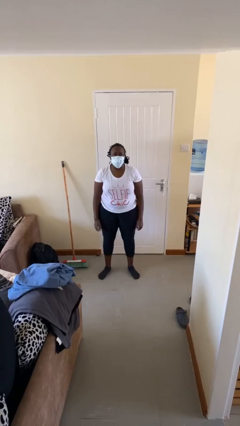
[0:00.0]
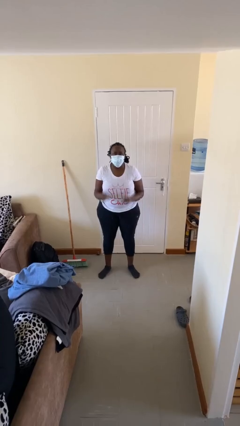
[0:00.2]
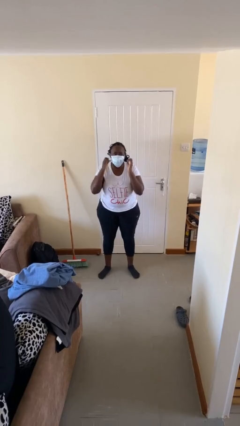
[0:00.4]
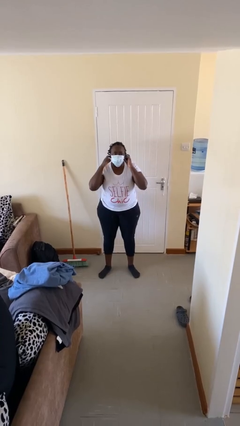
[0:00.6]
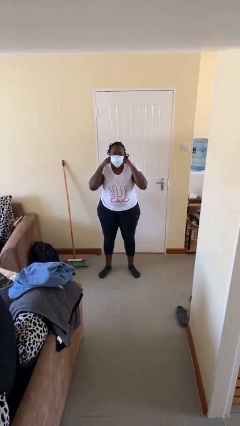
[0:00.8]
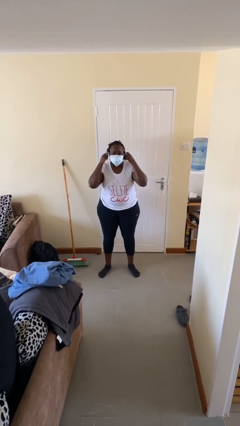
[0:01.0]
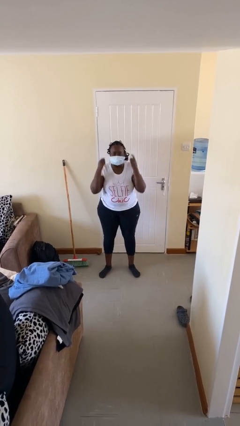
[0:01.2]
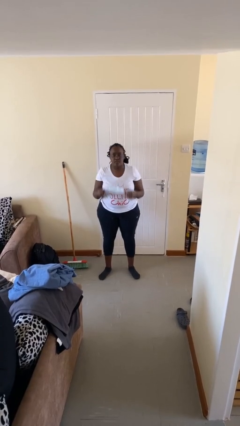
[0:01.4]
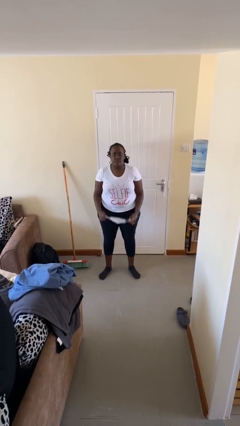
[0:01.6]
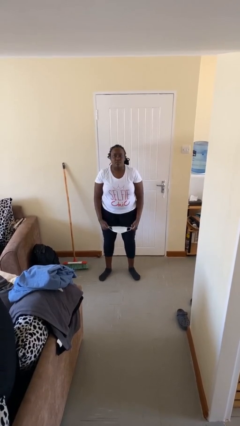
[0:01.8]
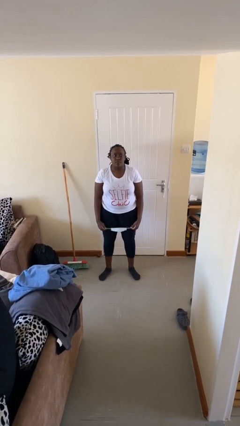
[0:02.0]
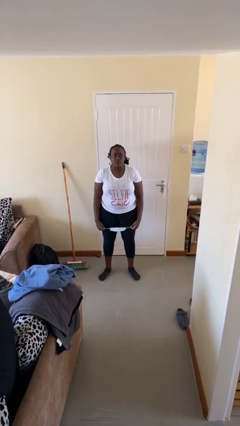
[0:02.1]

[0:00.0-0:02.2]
person takes off facemask

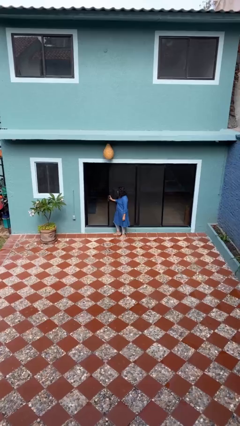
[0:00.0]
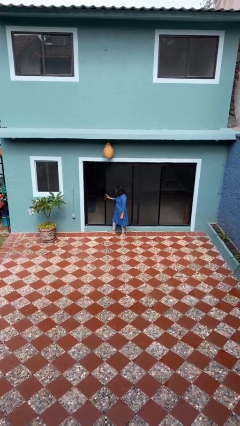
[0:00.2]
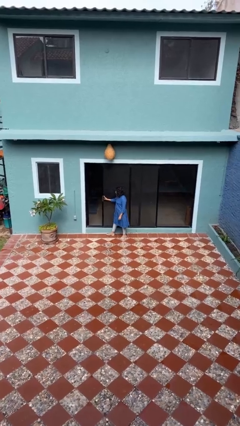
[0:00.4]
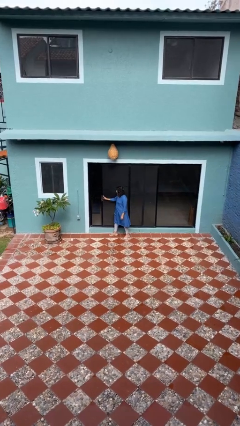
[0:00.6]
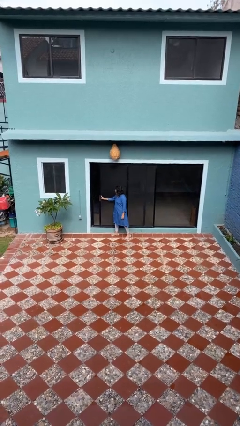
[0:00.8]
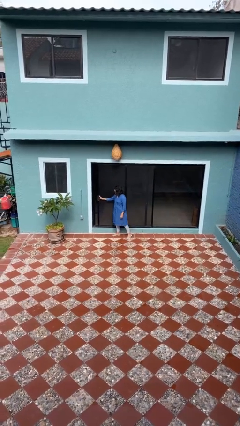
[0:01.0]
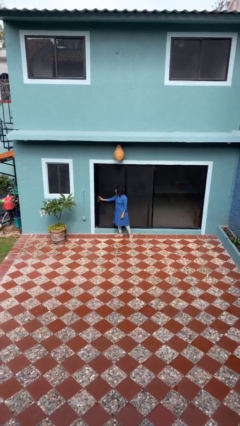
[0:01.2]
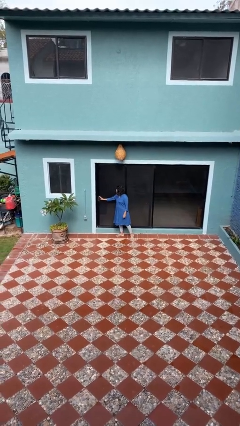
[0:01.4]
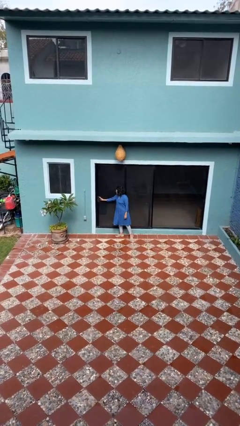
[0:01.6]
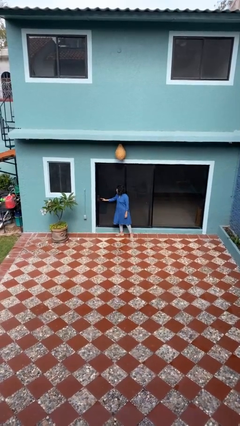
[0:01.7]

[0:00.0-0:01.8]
person closes sliding door

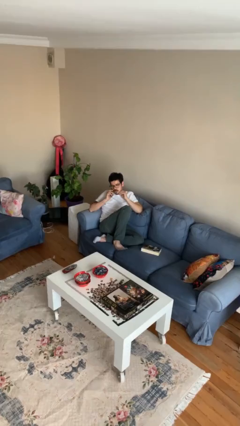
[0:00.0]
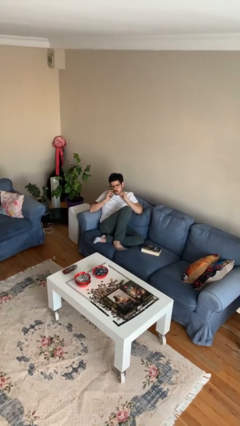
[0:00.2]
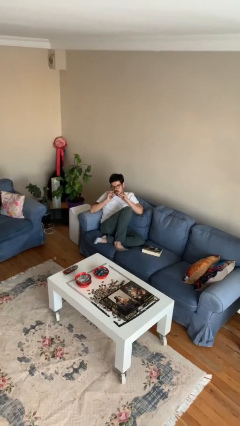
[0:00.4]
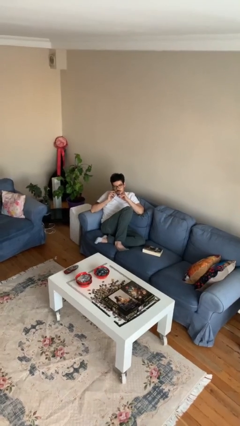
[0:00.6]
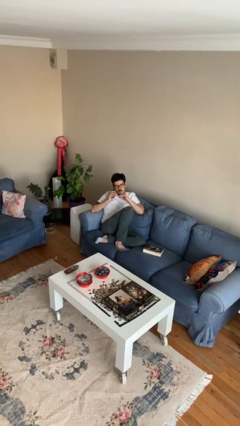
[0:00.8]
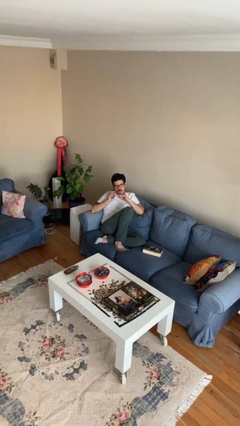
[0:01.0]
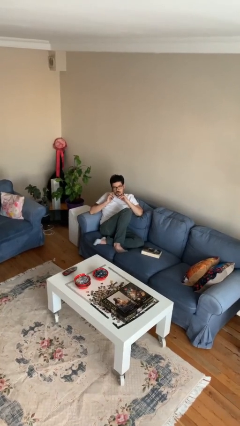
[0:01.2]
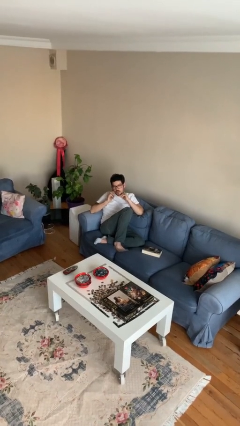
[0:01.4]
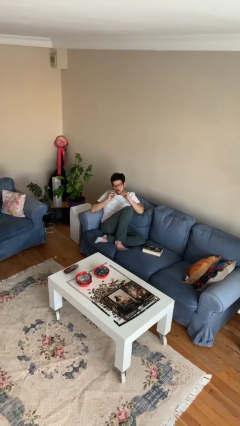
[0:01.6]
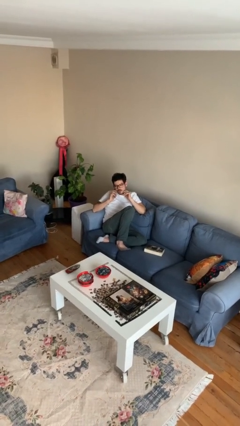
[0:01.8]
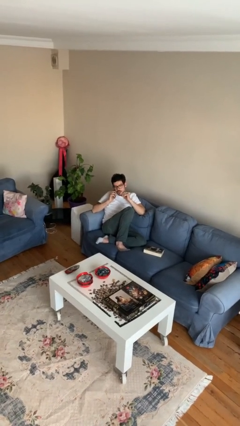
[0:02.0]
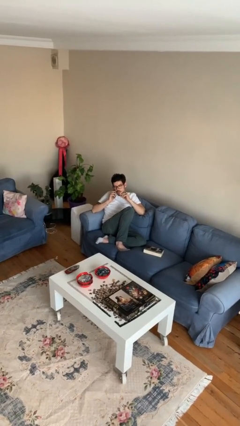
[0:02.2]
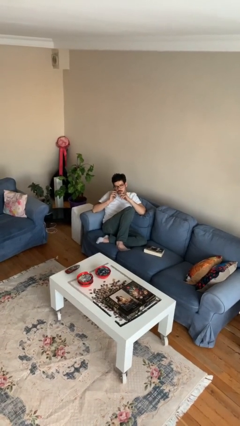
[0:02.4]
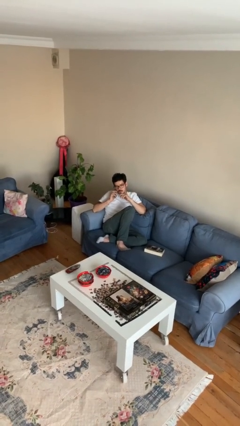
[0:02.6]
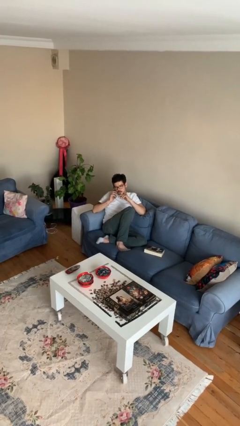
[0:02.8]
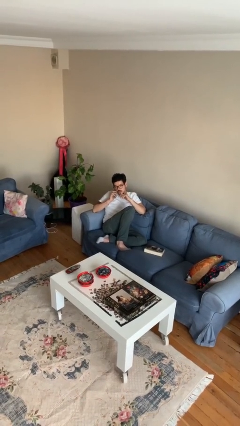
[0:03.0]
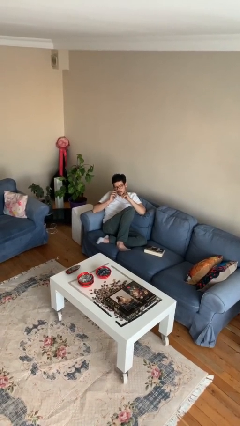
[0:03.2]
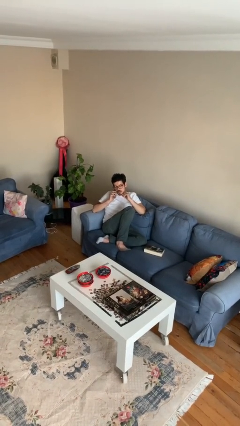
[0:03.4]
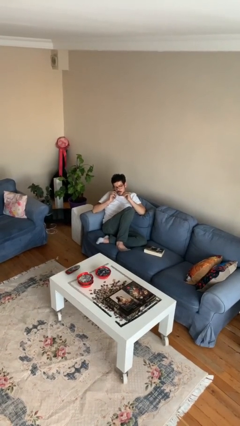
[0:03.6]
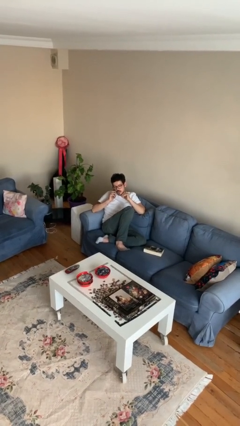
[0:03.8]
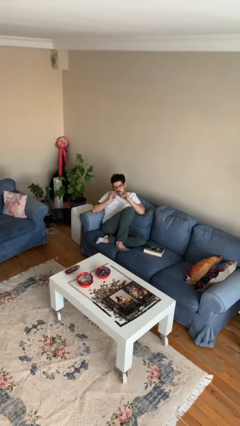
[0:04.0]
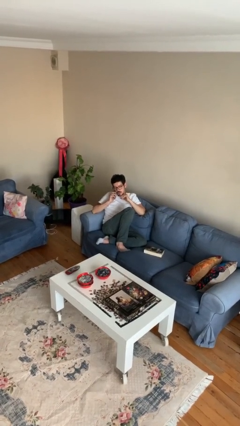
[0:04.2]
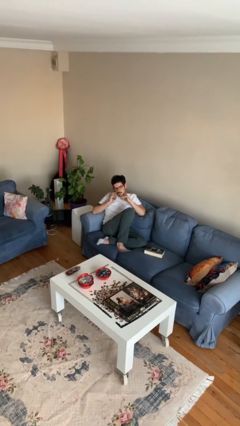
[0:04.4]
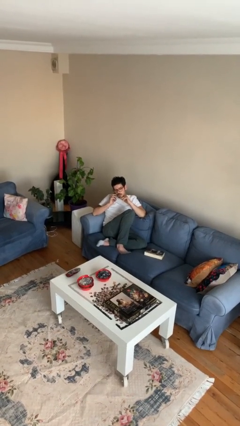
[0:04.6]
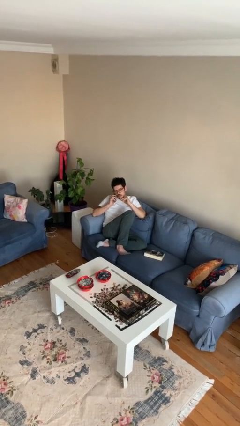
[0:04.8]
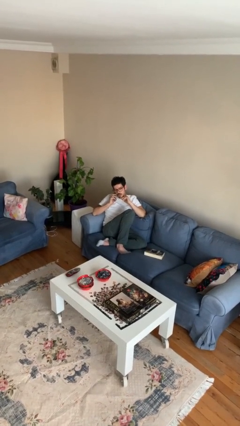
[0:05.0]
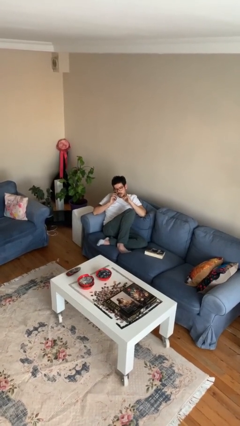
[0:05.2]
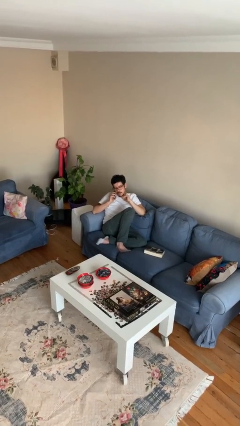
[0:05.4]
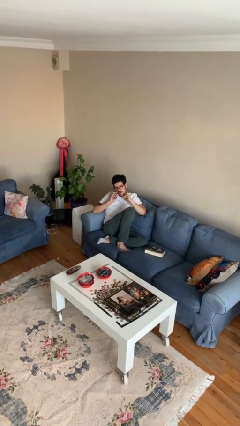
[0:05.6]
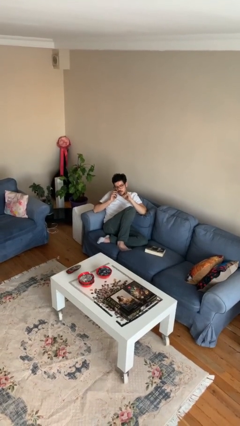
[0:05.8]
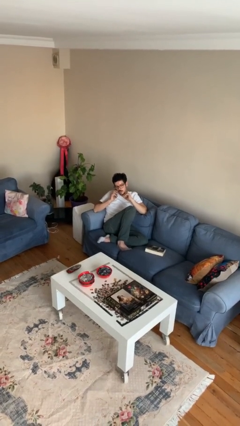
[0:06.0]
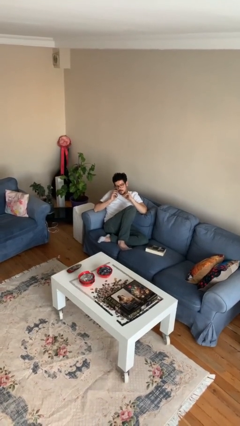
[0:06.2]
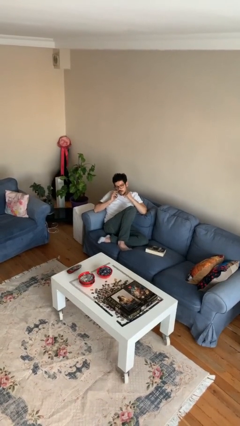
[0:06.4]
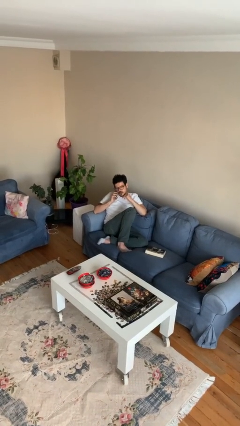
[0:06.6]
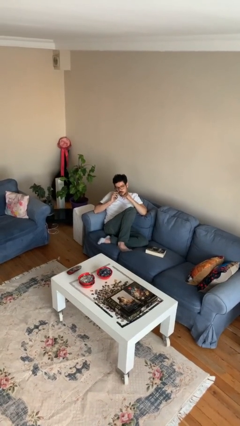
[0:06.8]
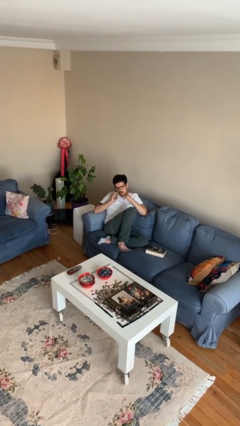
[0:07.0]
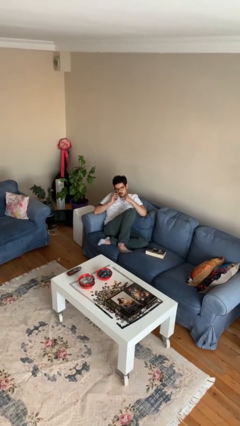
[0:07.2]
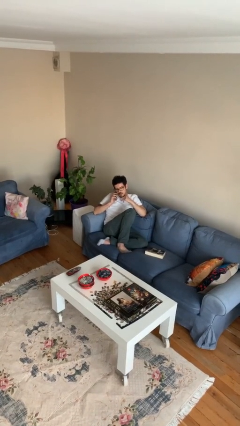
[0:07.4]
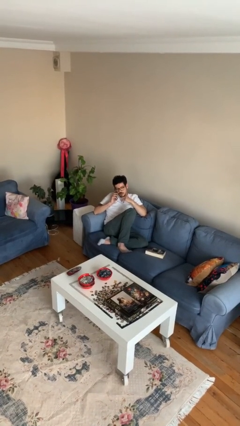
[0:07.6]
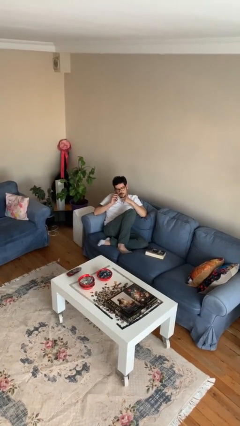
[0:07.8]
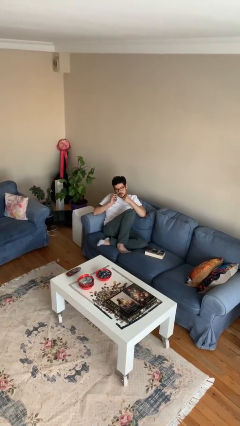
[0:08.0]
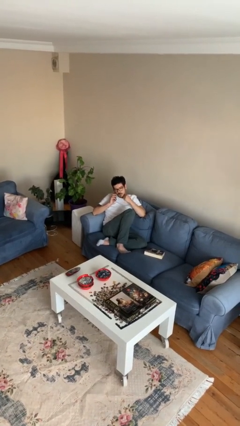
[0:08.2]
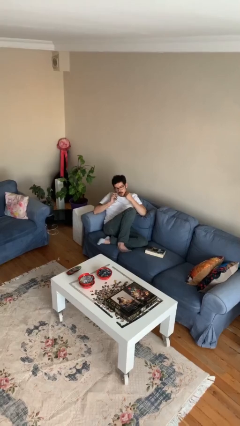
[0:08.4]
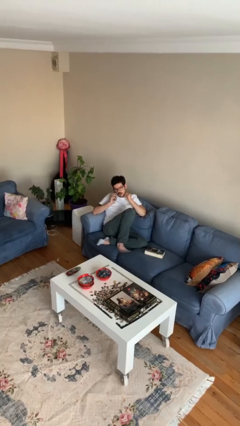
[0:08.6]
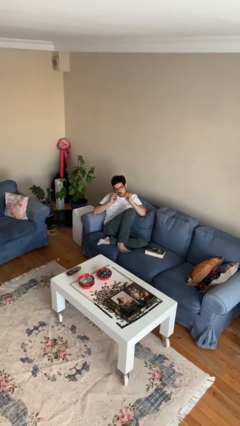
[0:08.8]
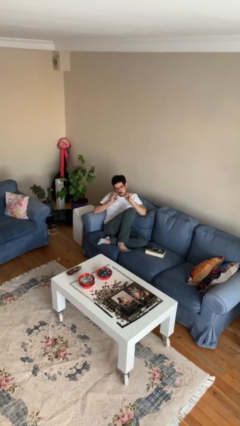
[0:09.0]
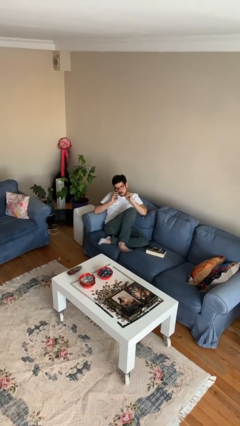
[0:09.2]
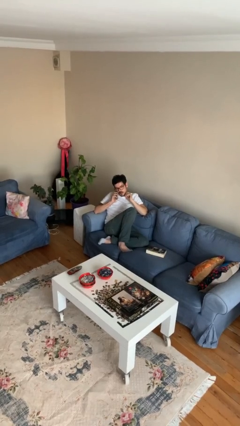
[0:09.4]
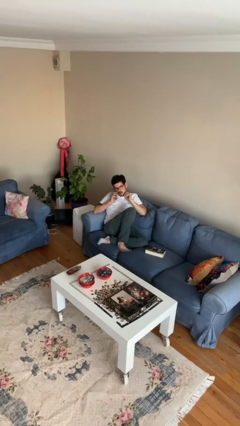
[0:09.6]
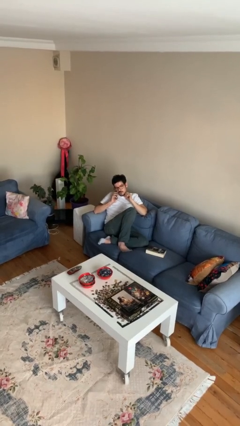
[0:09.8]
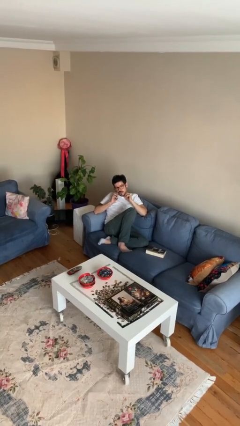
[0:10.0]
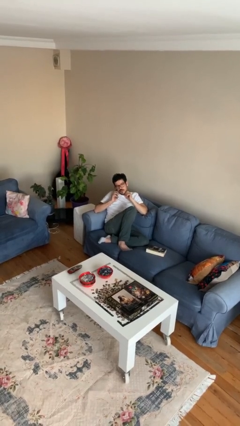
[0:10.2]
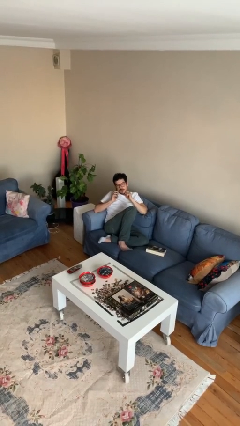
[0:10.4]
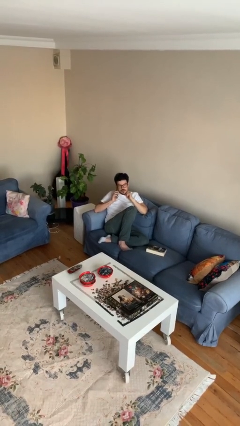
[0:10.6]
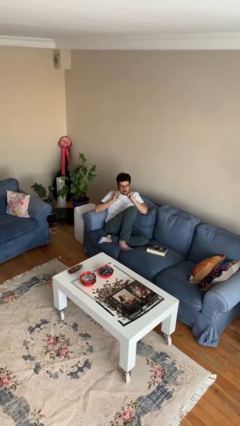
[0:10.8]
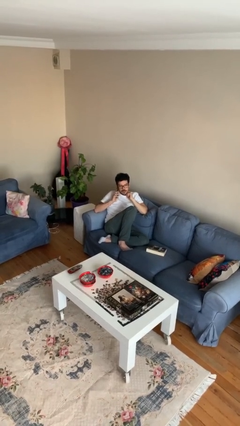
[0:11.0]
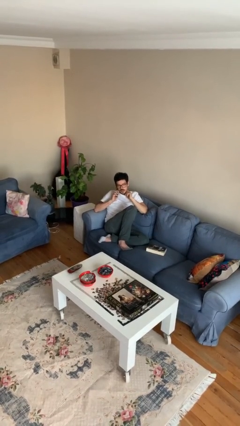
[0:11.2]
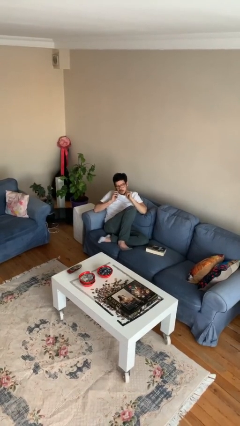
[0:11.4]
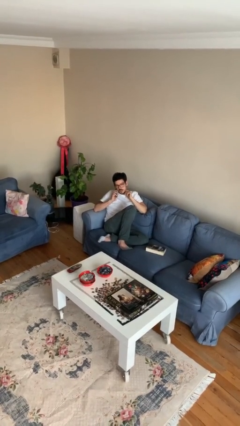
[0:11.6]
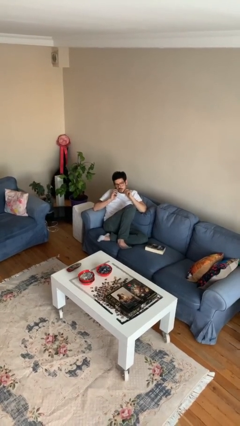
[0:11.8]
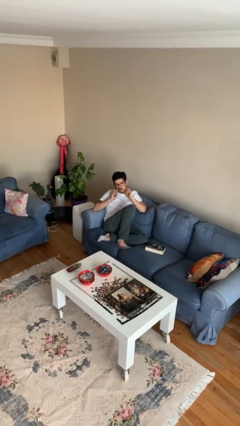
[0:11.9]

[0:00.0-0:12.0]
person talks on phone

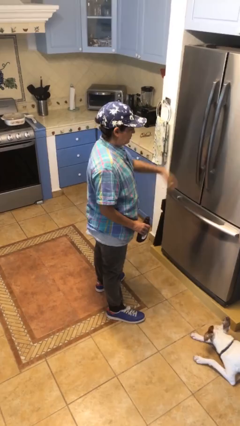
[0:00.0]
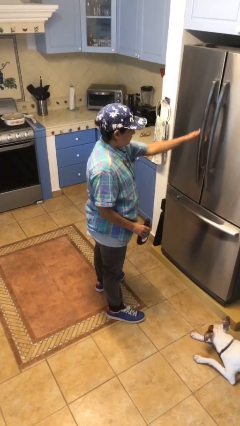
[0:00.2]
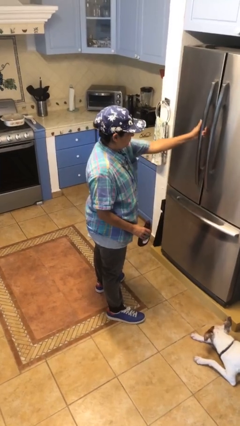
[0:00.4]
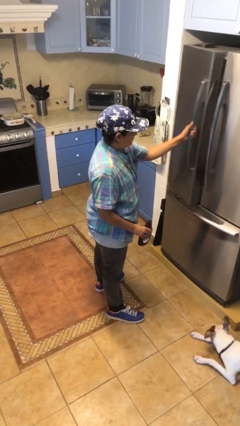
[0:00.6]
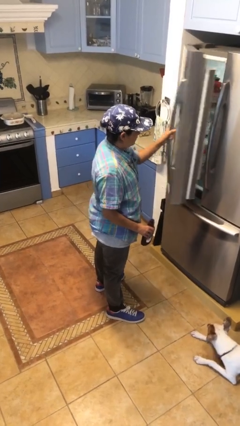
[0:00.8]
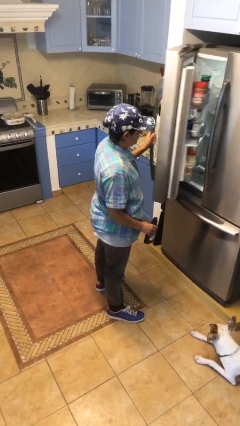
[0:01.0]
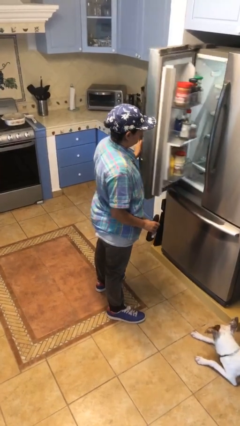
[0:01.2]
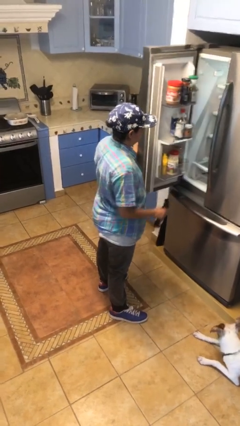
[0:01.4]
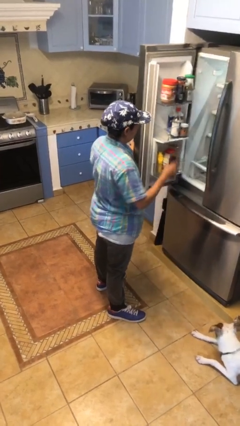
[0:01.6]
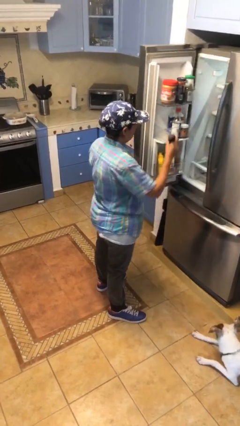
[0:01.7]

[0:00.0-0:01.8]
person opens refrigerator
